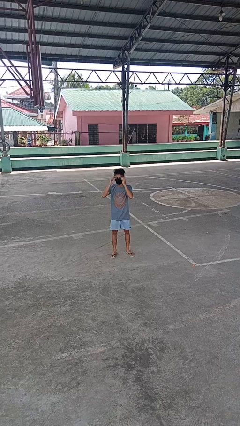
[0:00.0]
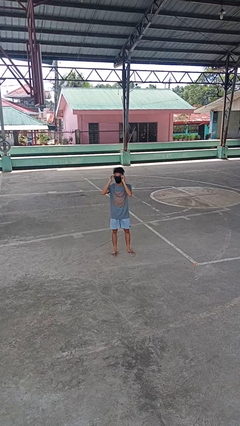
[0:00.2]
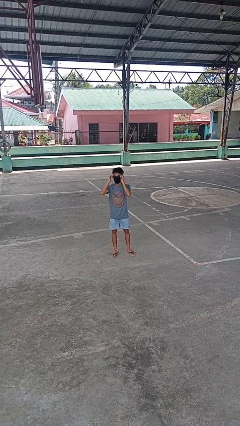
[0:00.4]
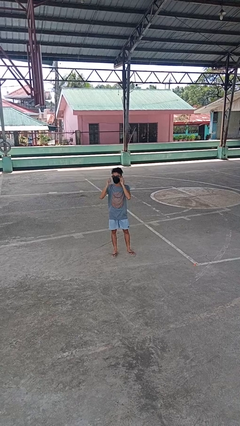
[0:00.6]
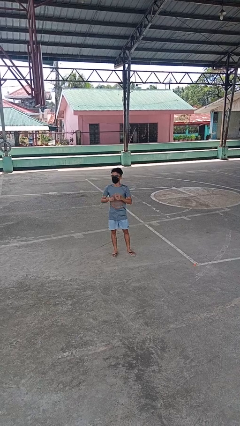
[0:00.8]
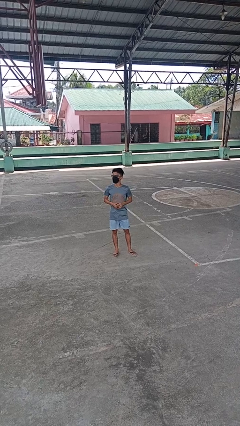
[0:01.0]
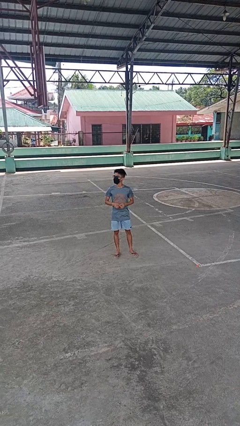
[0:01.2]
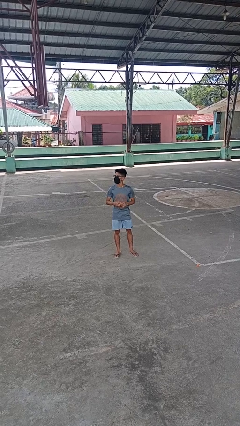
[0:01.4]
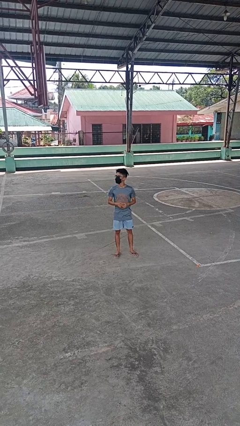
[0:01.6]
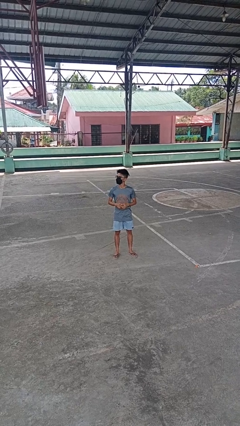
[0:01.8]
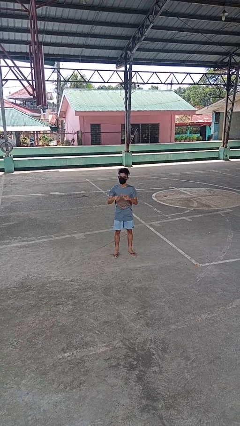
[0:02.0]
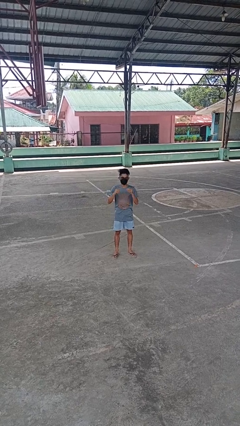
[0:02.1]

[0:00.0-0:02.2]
person puts on glasses

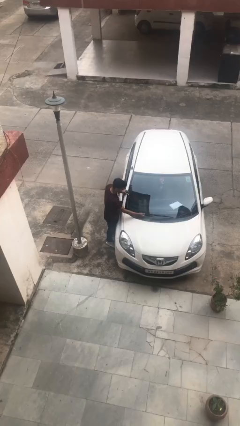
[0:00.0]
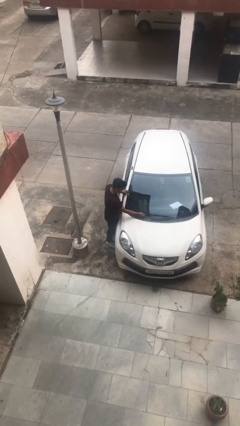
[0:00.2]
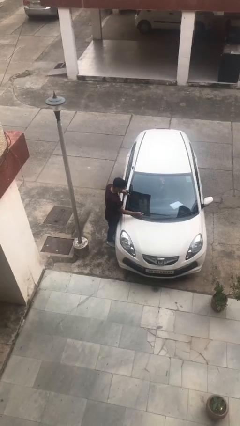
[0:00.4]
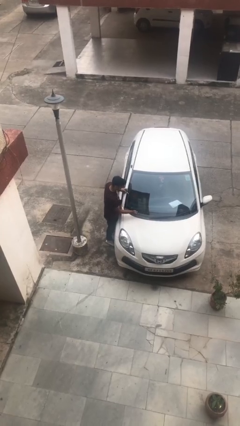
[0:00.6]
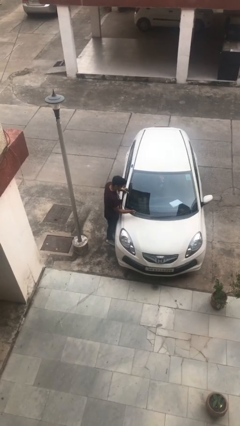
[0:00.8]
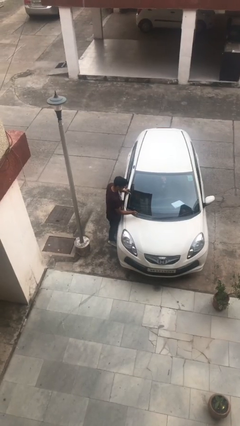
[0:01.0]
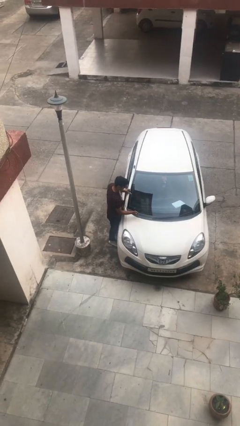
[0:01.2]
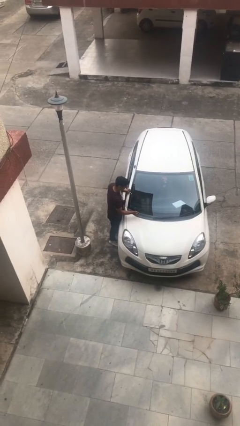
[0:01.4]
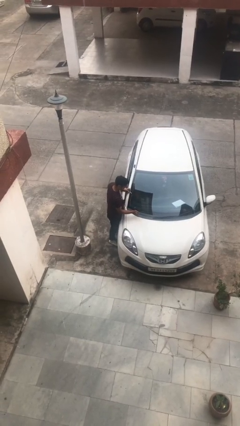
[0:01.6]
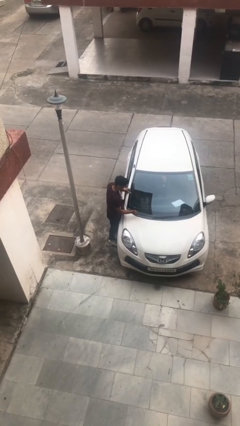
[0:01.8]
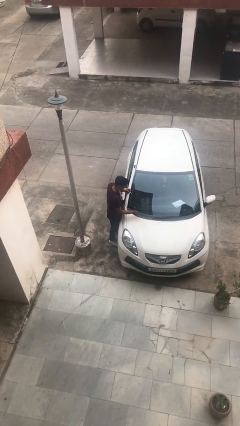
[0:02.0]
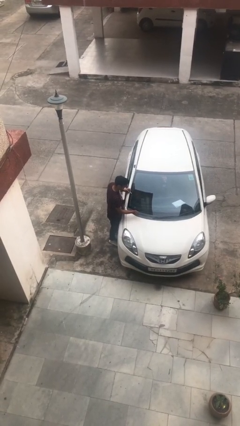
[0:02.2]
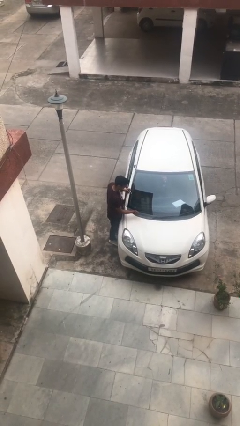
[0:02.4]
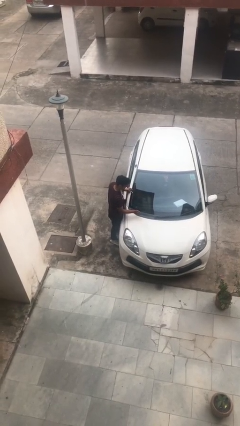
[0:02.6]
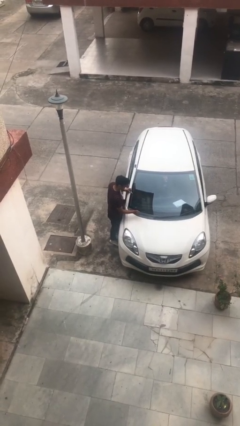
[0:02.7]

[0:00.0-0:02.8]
person flips up car wipers

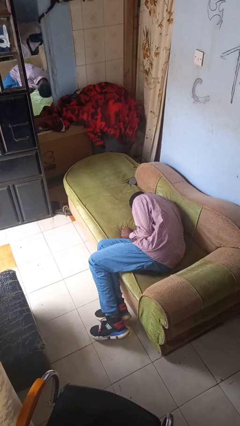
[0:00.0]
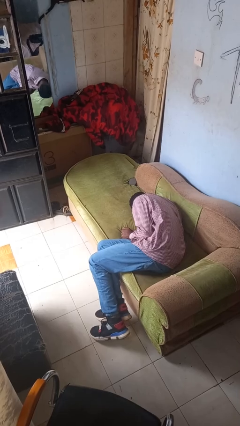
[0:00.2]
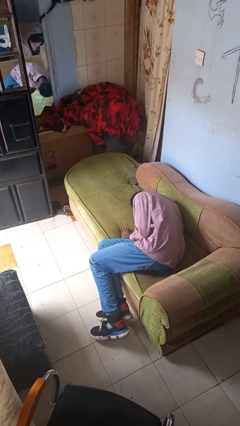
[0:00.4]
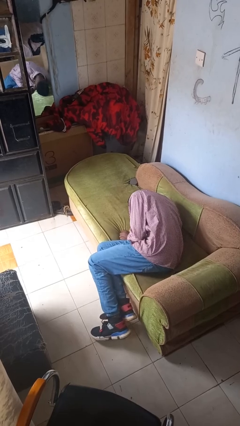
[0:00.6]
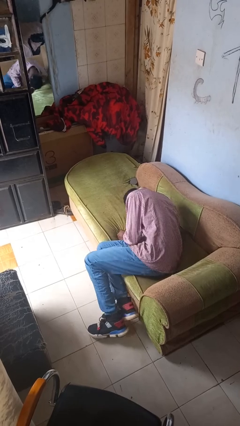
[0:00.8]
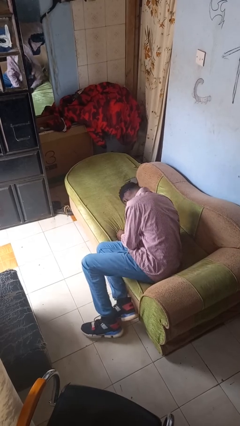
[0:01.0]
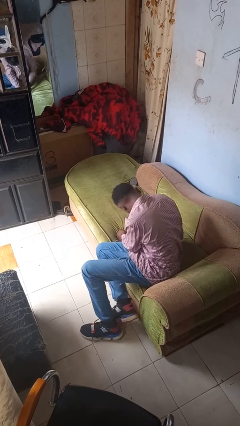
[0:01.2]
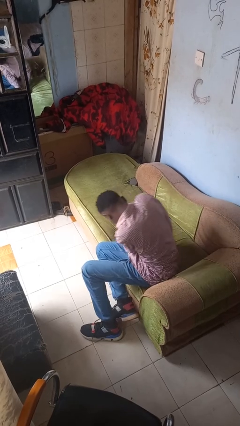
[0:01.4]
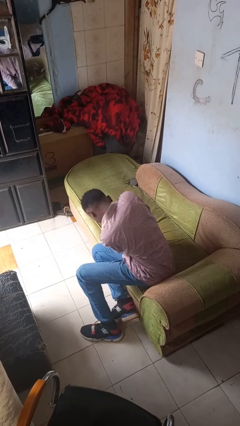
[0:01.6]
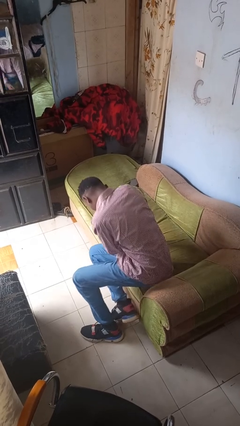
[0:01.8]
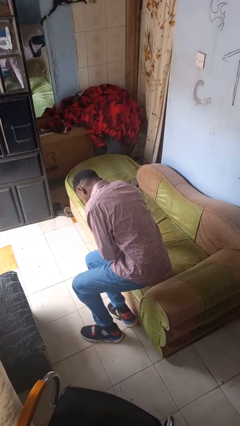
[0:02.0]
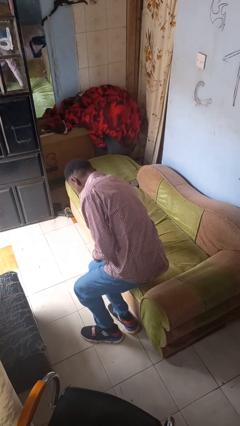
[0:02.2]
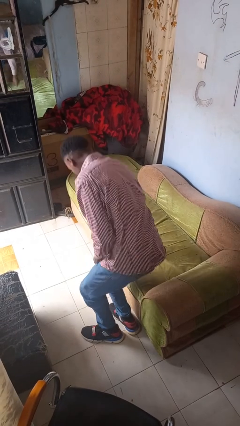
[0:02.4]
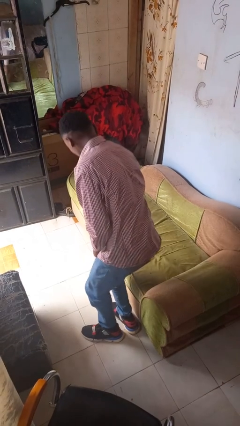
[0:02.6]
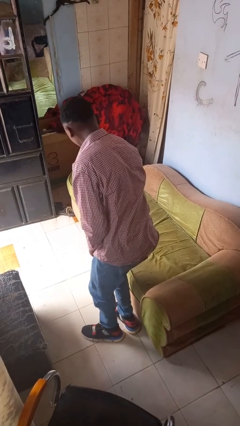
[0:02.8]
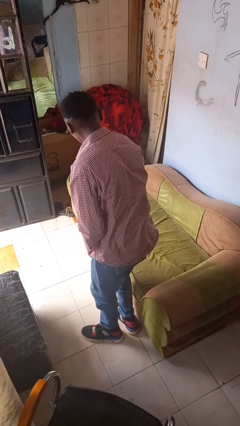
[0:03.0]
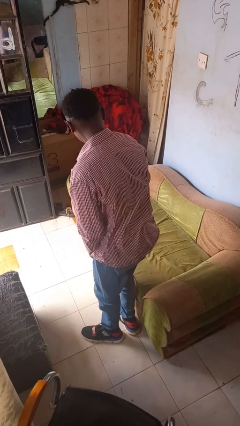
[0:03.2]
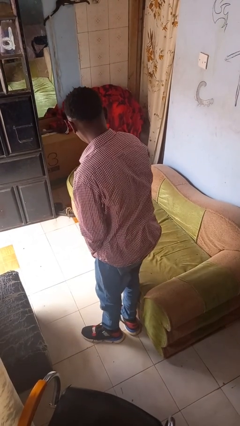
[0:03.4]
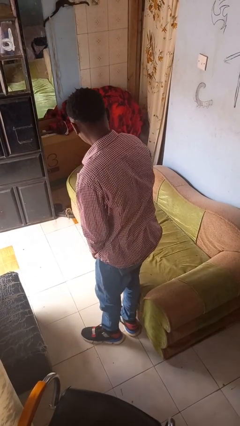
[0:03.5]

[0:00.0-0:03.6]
person stands up

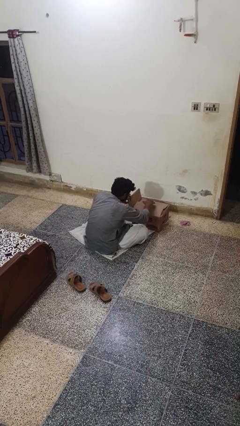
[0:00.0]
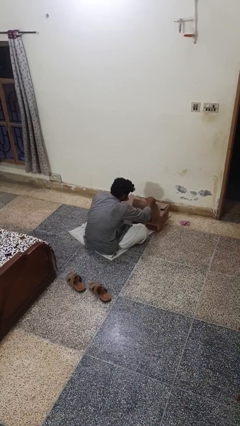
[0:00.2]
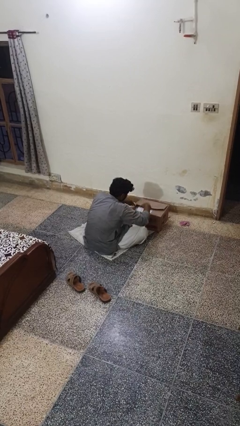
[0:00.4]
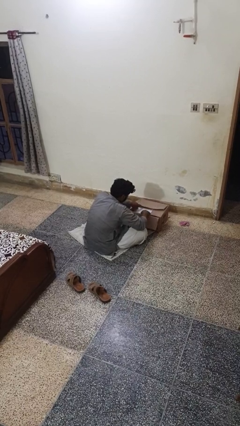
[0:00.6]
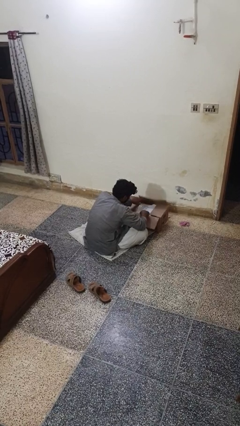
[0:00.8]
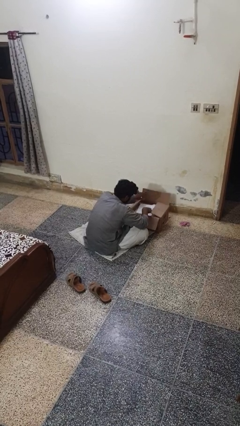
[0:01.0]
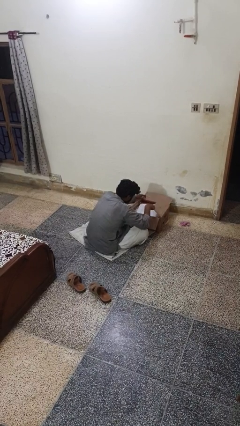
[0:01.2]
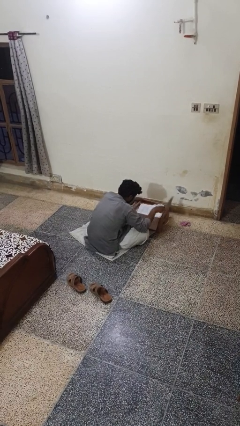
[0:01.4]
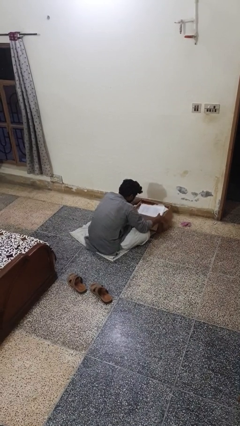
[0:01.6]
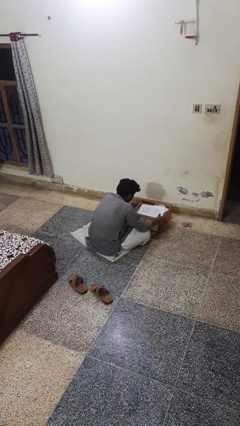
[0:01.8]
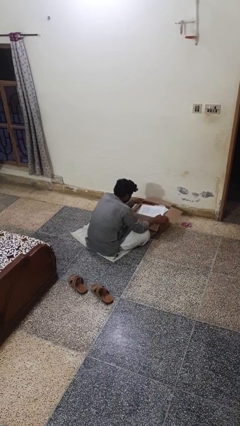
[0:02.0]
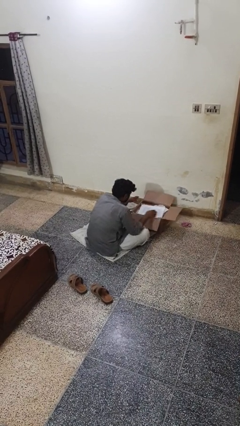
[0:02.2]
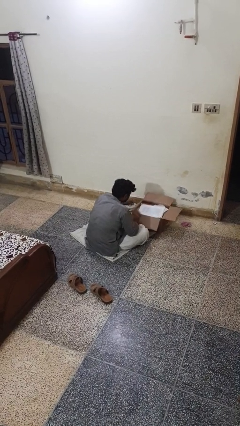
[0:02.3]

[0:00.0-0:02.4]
person opens box

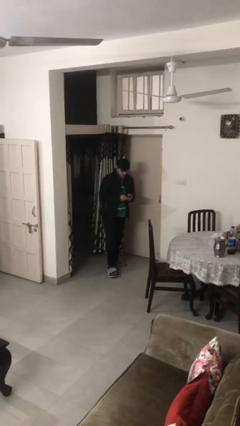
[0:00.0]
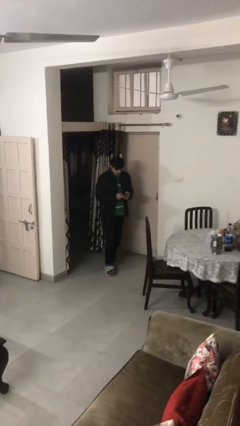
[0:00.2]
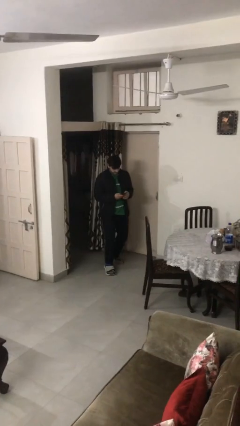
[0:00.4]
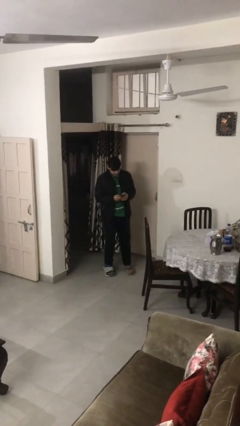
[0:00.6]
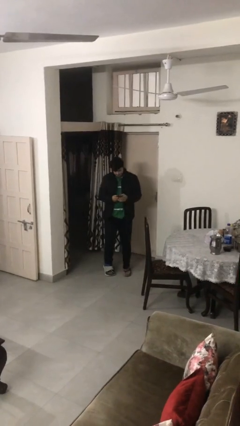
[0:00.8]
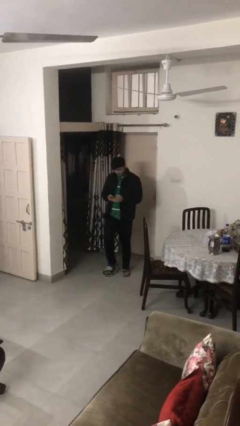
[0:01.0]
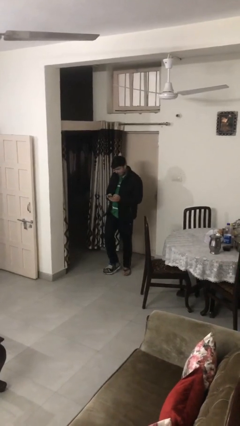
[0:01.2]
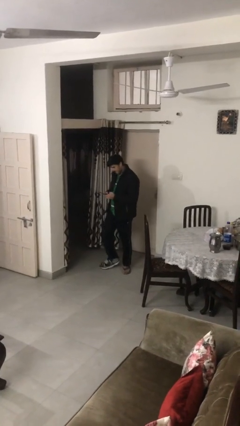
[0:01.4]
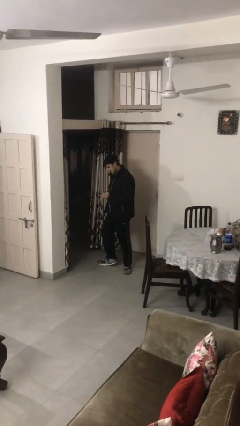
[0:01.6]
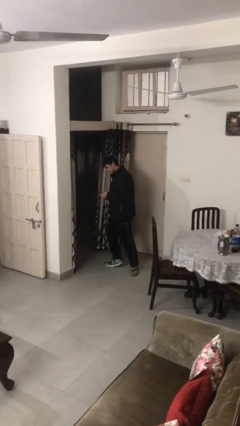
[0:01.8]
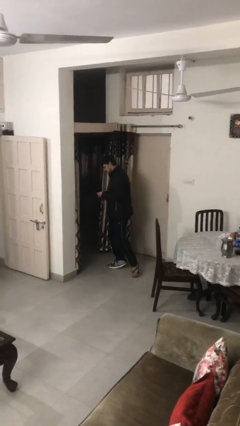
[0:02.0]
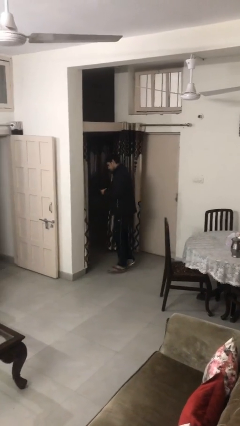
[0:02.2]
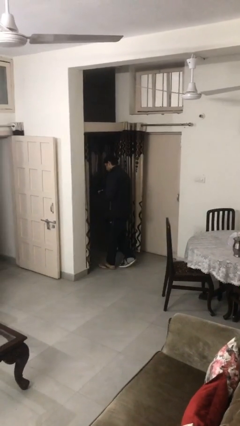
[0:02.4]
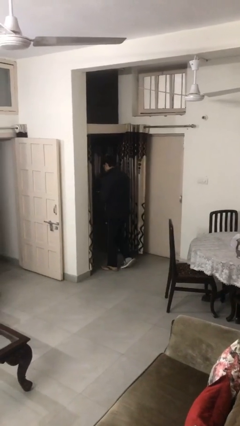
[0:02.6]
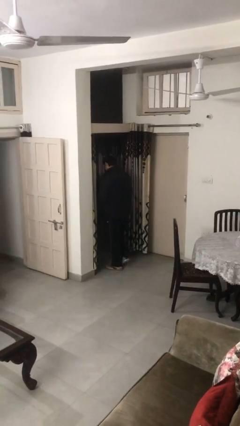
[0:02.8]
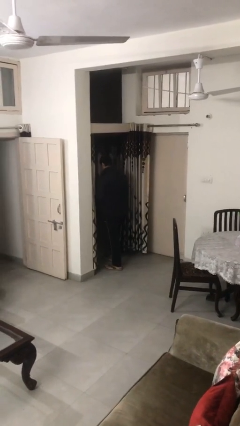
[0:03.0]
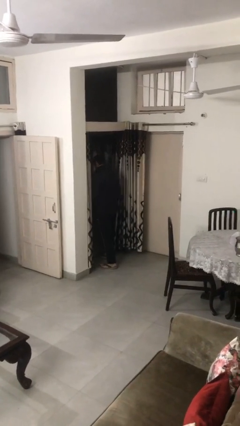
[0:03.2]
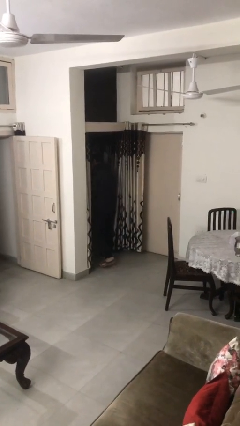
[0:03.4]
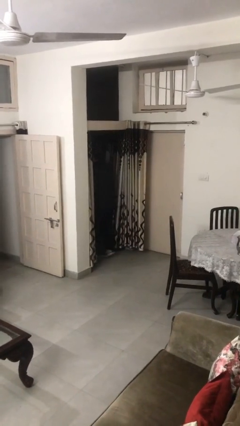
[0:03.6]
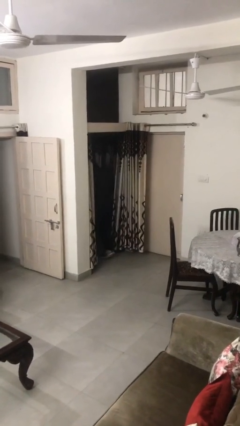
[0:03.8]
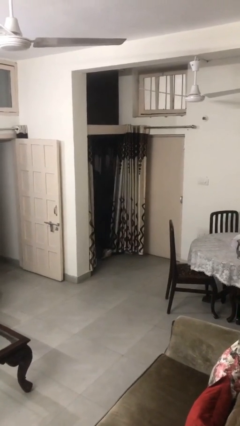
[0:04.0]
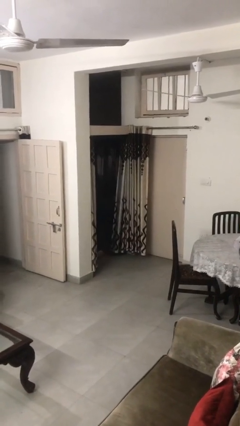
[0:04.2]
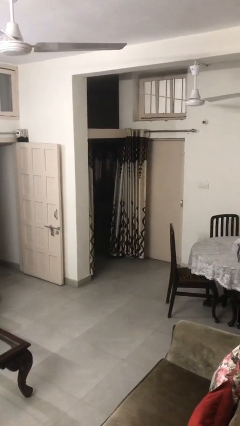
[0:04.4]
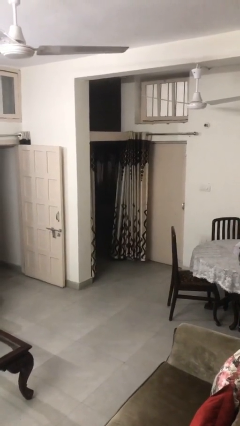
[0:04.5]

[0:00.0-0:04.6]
person exits scene through structure

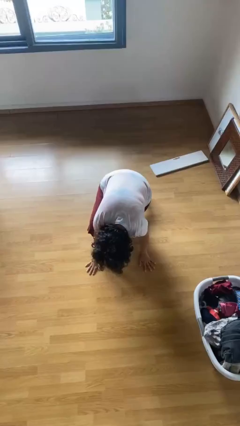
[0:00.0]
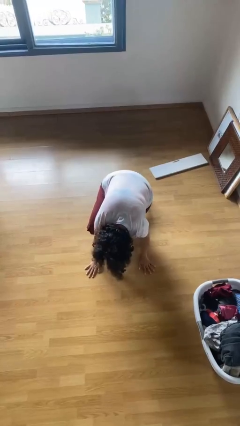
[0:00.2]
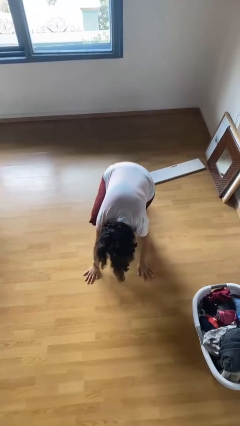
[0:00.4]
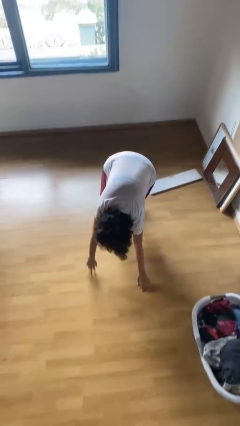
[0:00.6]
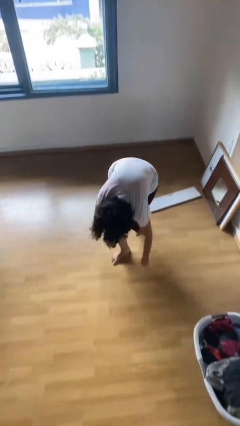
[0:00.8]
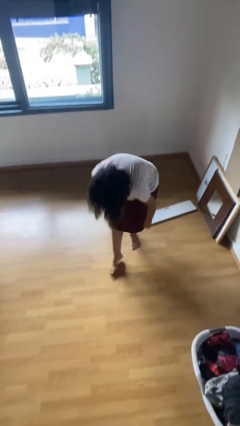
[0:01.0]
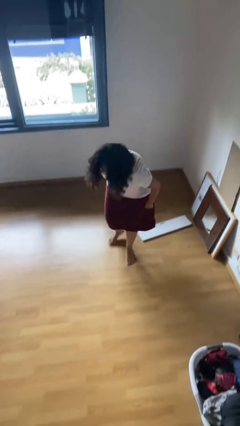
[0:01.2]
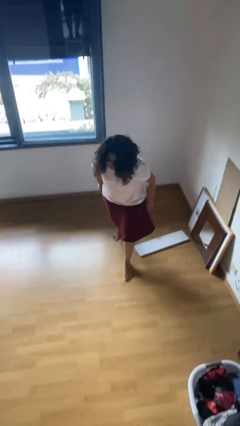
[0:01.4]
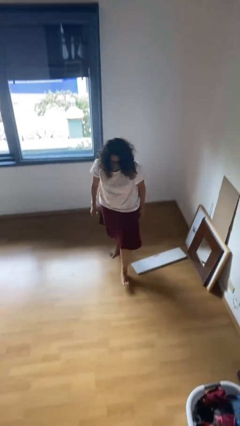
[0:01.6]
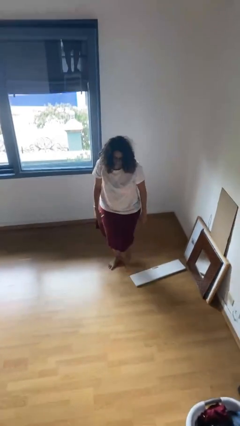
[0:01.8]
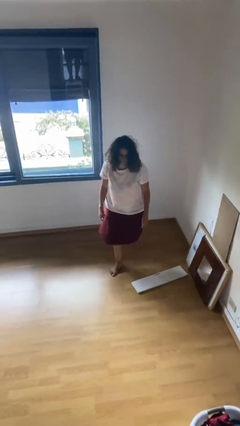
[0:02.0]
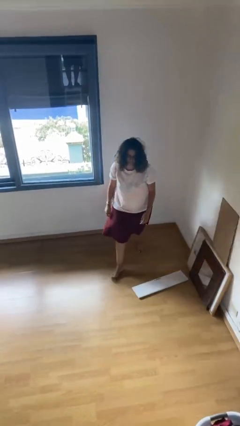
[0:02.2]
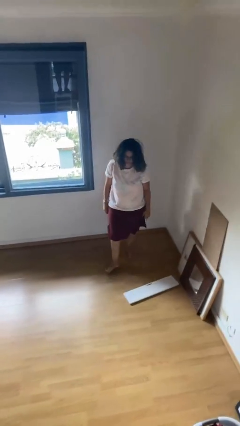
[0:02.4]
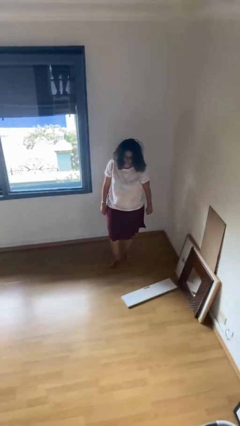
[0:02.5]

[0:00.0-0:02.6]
person stands up from floor
